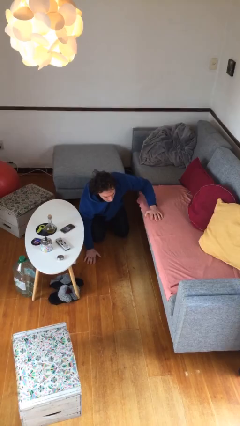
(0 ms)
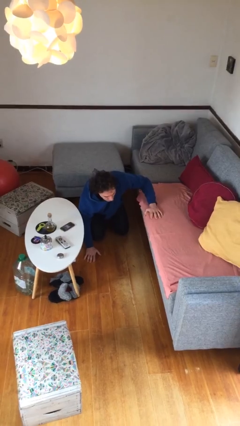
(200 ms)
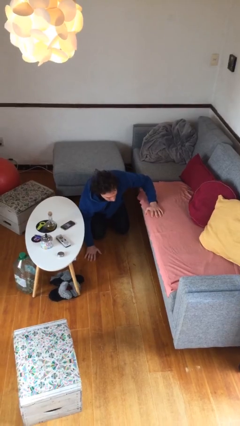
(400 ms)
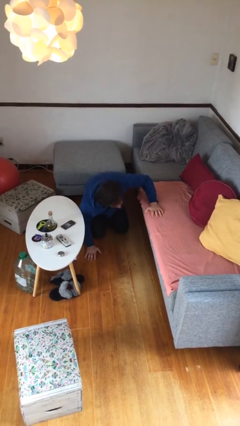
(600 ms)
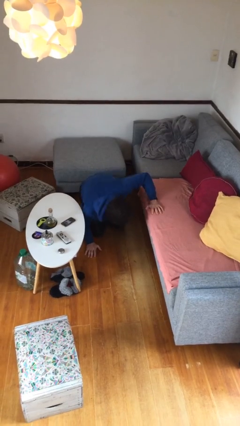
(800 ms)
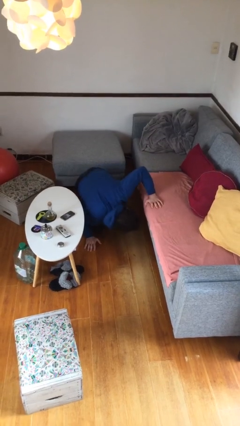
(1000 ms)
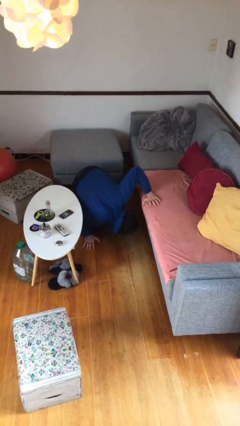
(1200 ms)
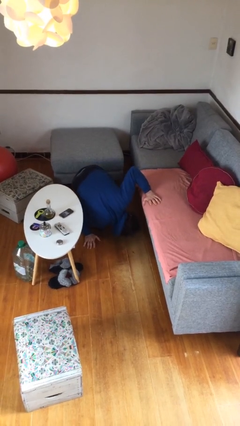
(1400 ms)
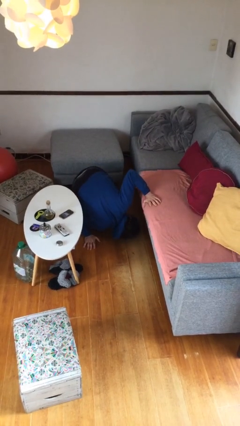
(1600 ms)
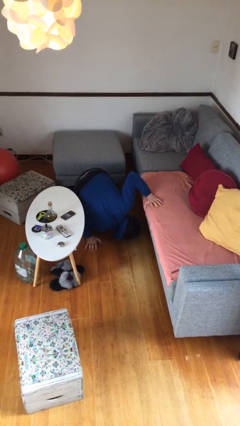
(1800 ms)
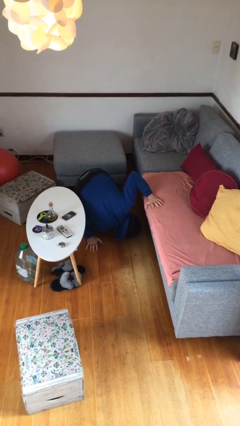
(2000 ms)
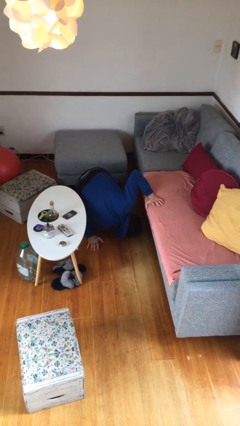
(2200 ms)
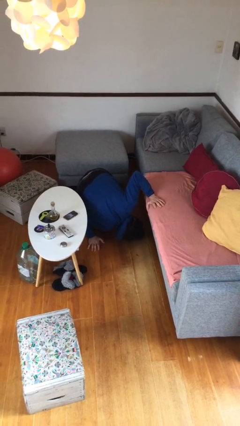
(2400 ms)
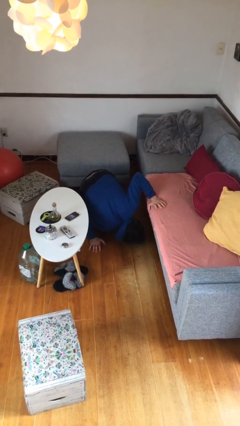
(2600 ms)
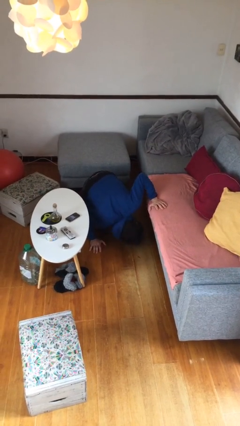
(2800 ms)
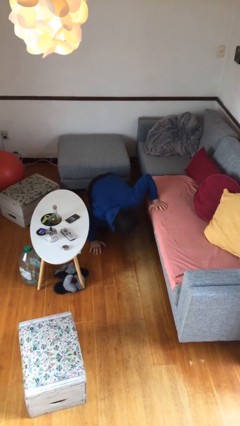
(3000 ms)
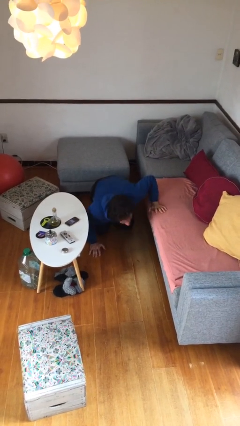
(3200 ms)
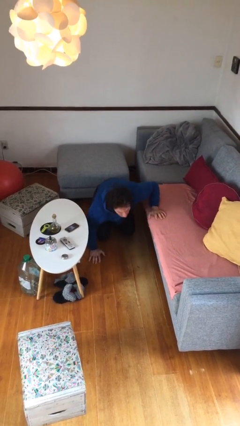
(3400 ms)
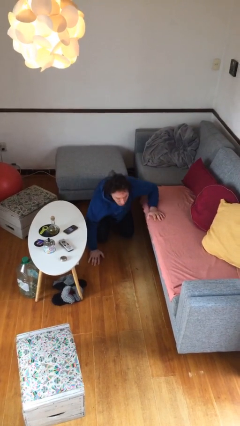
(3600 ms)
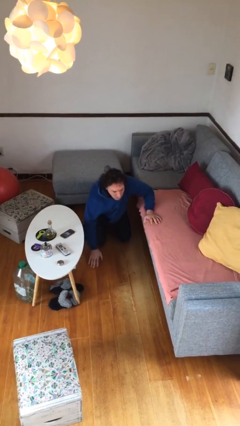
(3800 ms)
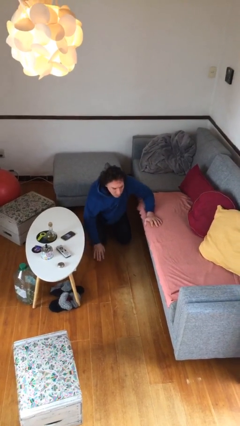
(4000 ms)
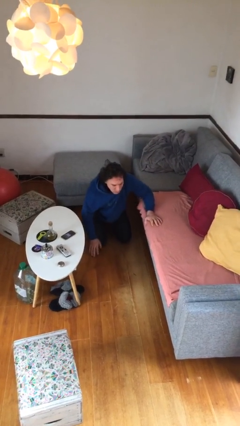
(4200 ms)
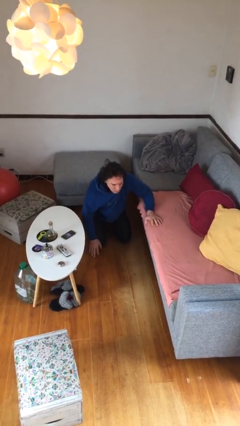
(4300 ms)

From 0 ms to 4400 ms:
person searches under couch

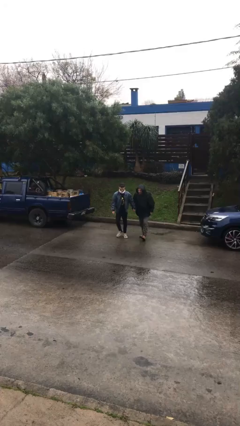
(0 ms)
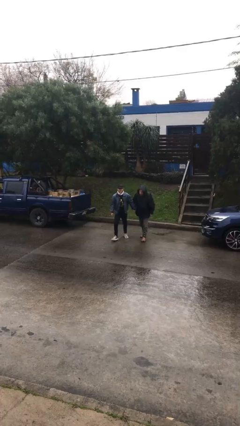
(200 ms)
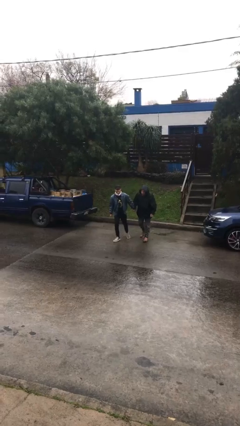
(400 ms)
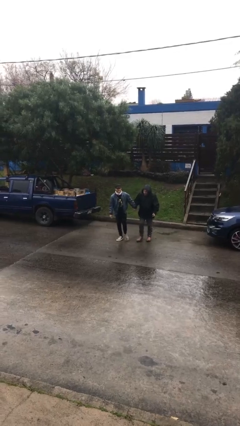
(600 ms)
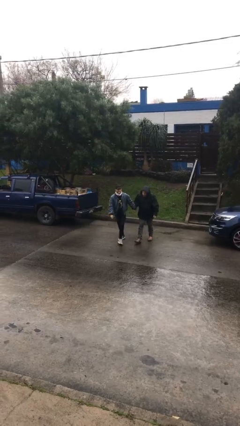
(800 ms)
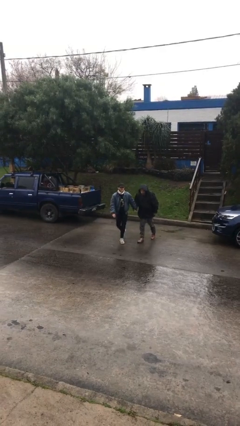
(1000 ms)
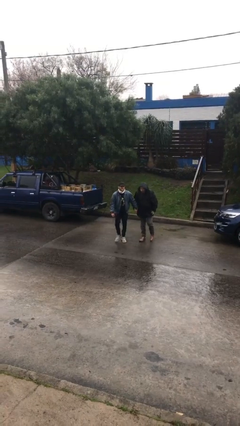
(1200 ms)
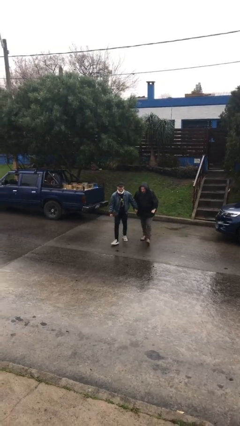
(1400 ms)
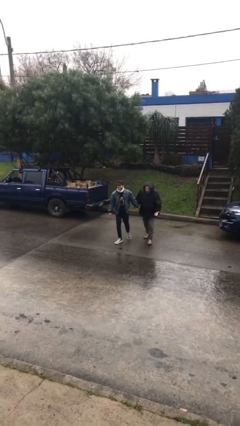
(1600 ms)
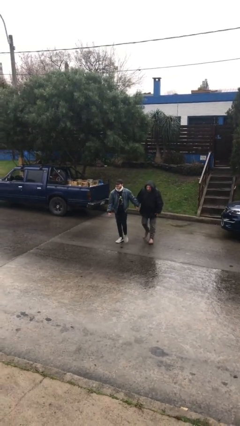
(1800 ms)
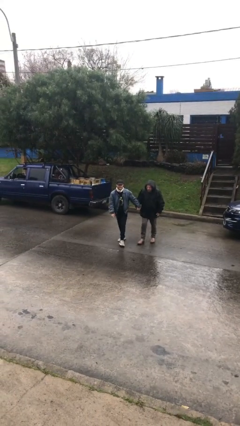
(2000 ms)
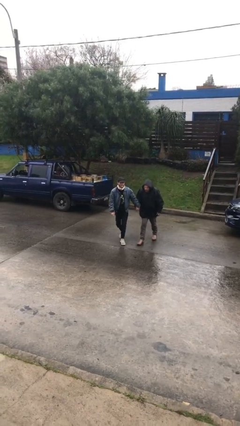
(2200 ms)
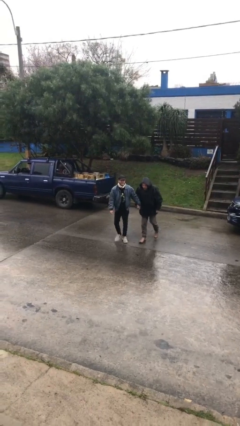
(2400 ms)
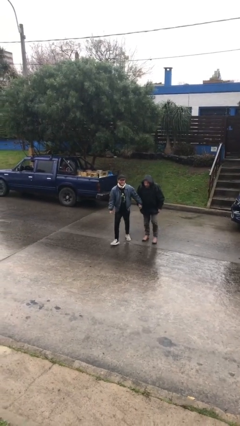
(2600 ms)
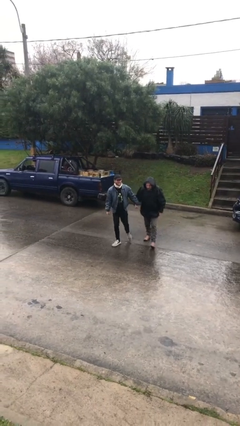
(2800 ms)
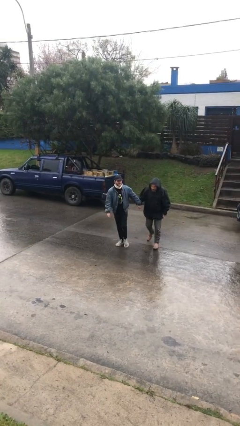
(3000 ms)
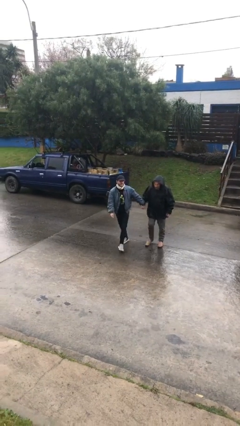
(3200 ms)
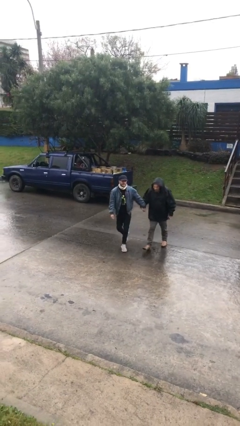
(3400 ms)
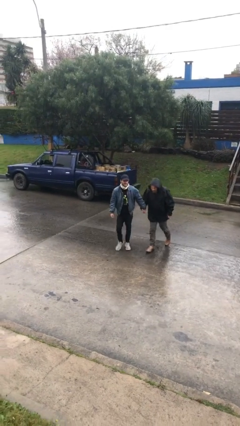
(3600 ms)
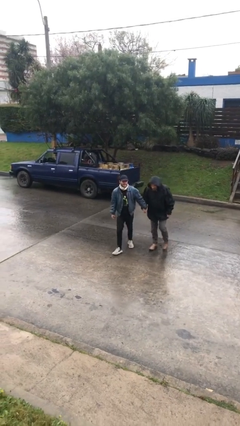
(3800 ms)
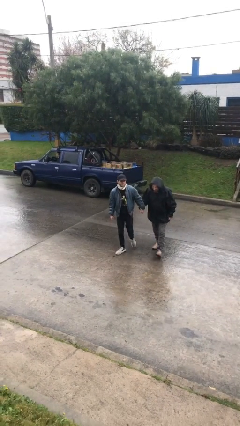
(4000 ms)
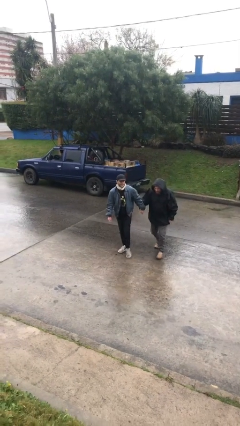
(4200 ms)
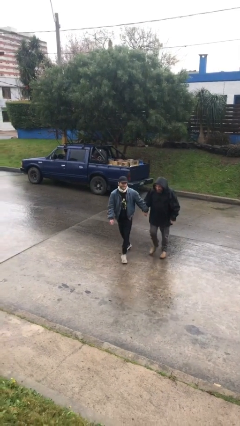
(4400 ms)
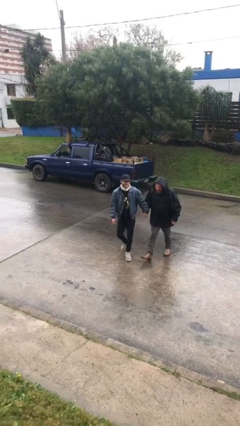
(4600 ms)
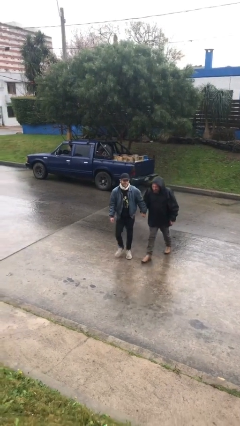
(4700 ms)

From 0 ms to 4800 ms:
person holds hand

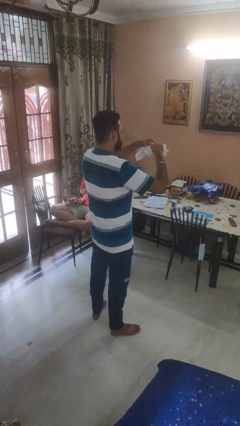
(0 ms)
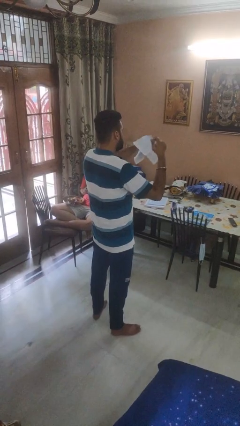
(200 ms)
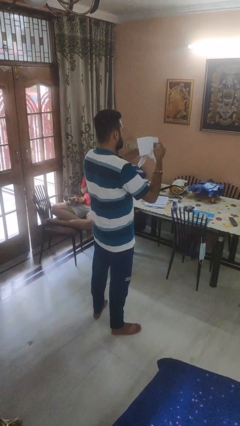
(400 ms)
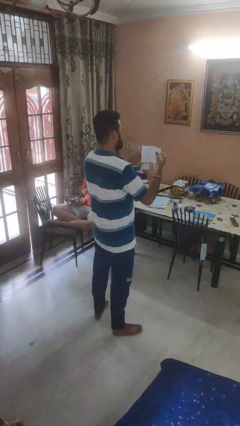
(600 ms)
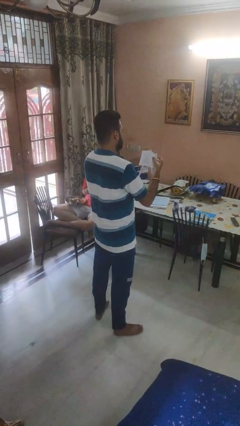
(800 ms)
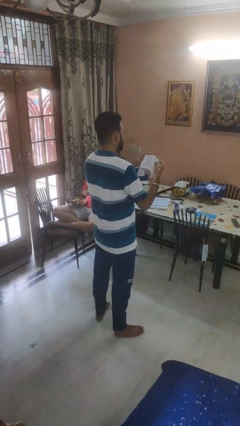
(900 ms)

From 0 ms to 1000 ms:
person tears paper

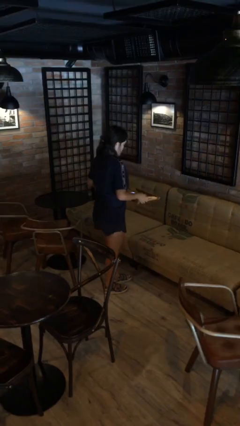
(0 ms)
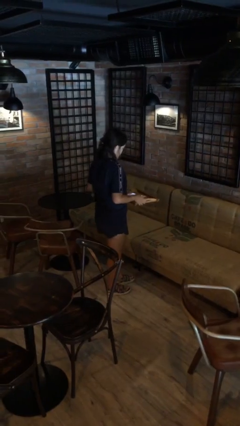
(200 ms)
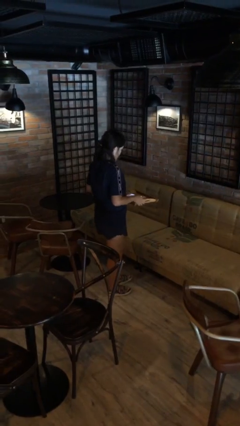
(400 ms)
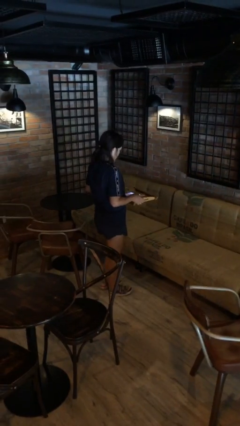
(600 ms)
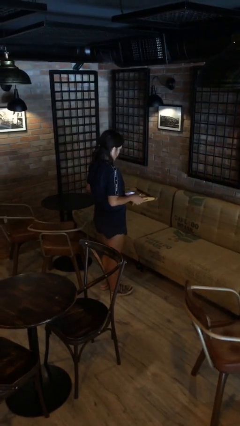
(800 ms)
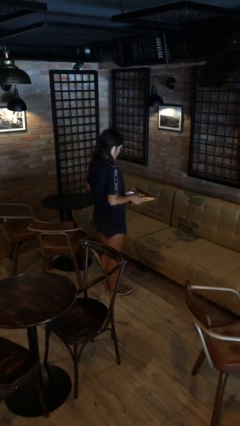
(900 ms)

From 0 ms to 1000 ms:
person puts down object on couch

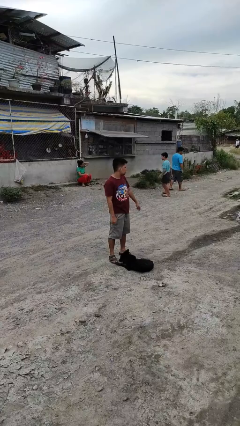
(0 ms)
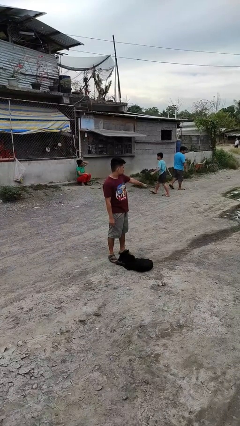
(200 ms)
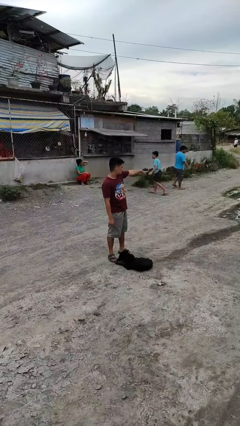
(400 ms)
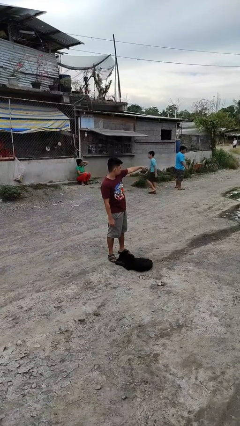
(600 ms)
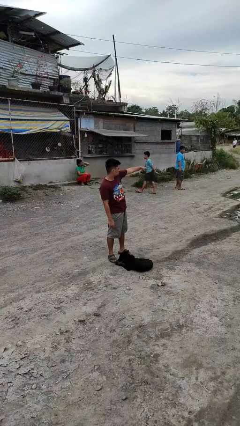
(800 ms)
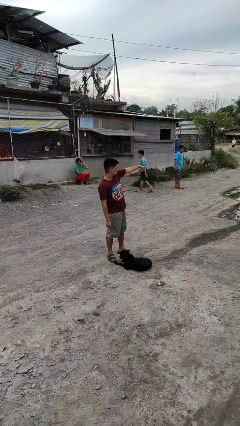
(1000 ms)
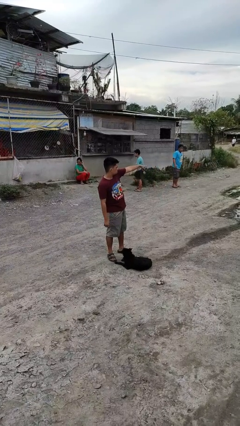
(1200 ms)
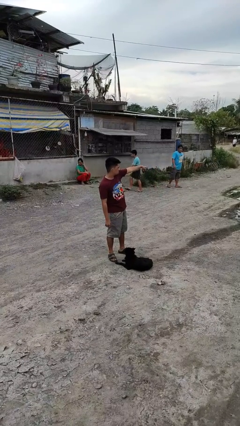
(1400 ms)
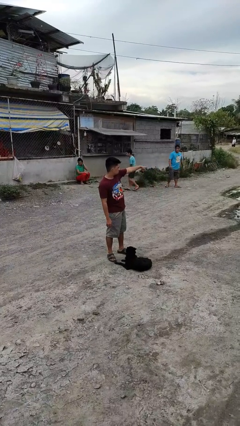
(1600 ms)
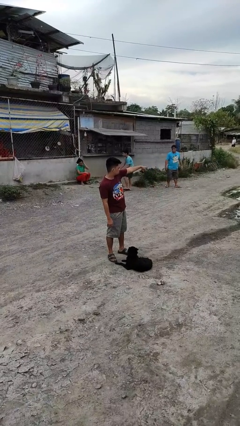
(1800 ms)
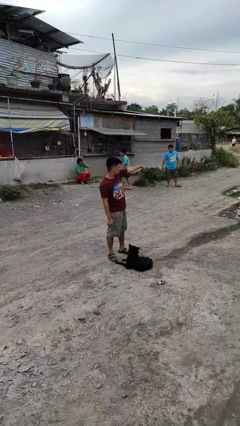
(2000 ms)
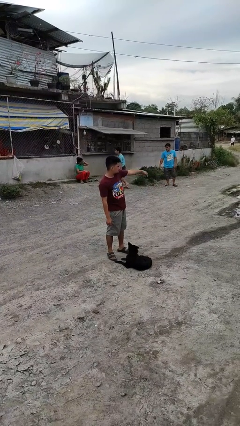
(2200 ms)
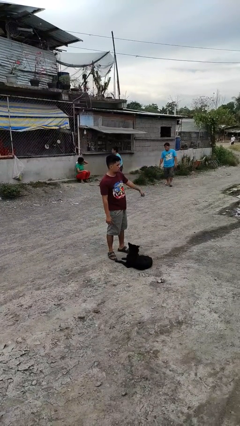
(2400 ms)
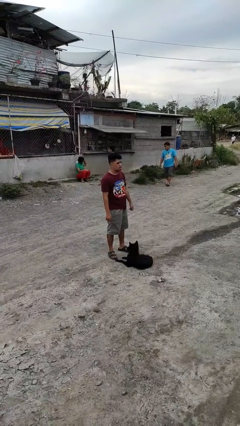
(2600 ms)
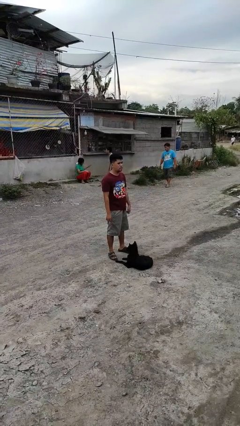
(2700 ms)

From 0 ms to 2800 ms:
person points at person

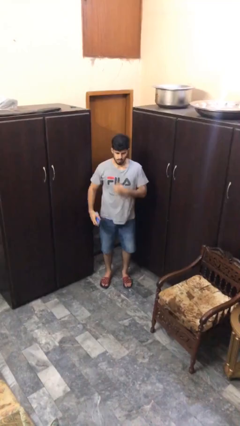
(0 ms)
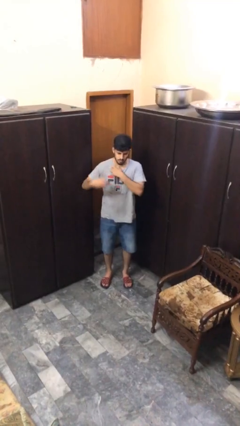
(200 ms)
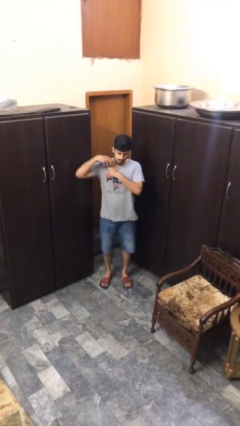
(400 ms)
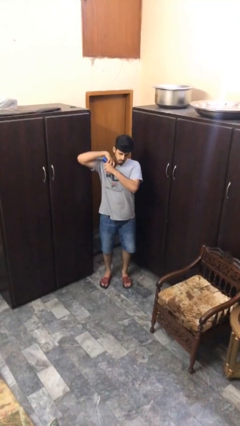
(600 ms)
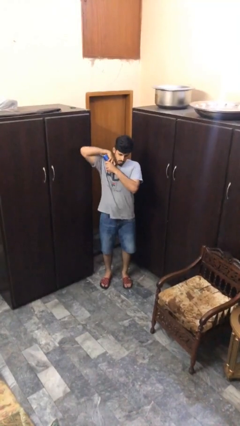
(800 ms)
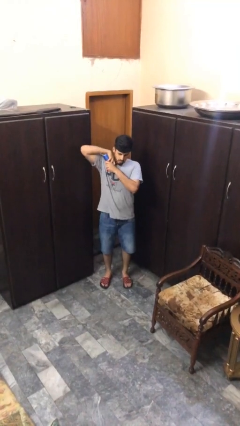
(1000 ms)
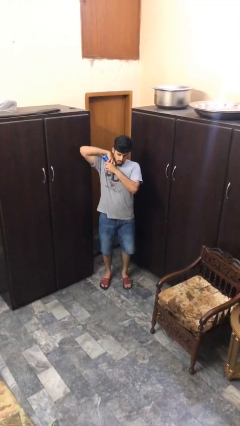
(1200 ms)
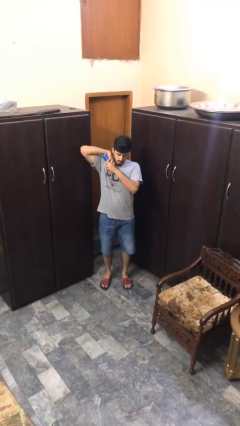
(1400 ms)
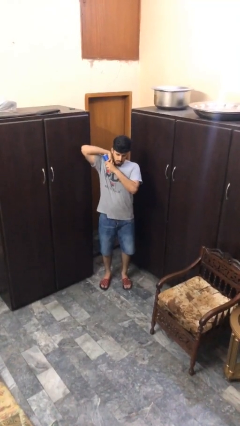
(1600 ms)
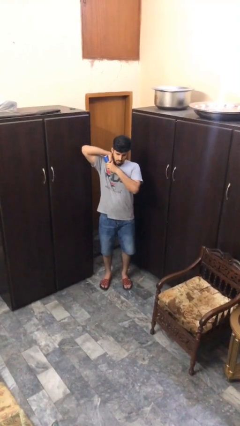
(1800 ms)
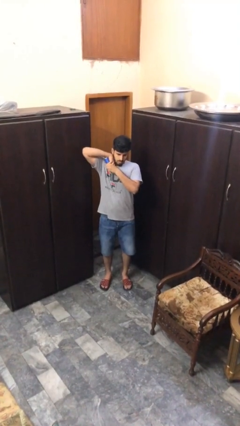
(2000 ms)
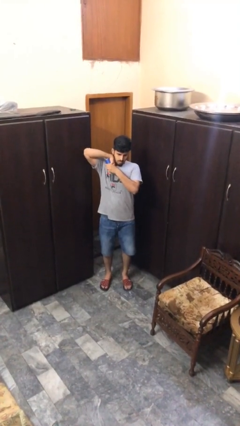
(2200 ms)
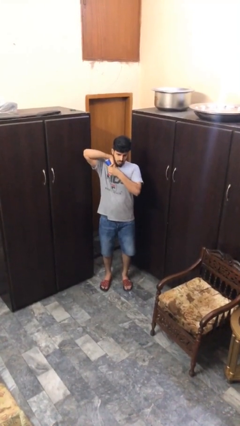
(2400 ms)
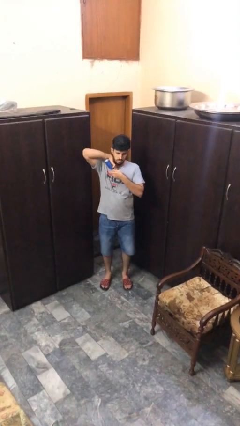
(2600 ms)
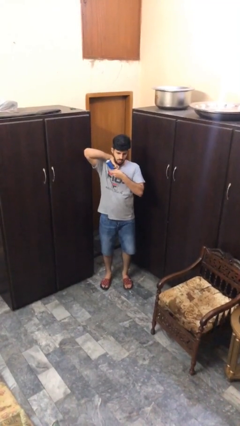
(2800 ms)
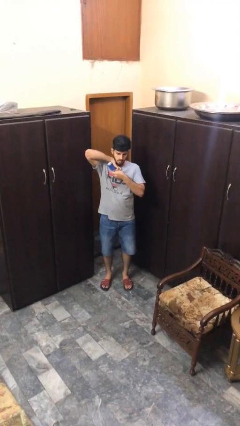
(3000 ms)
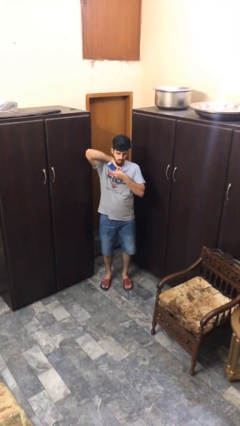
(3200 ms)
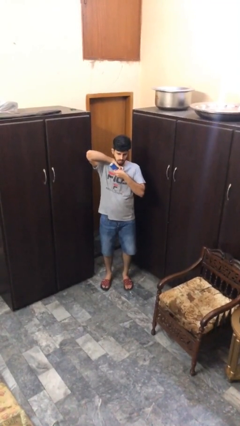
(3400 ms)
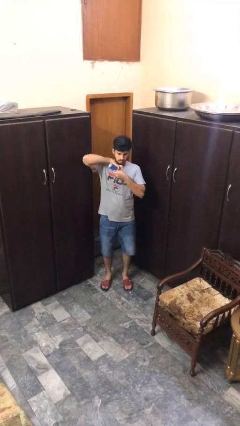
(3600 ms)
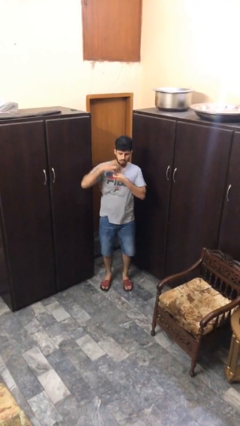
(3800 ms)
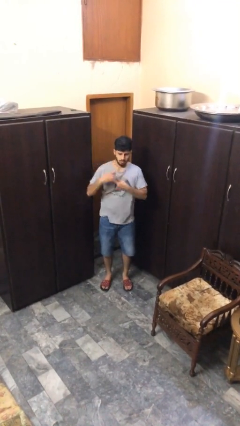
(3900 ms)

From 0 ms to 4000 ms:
person applies deodorant
